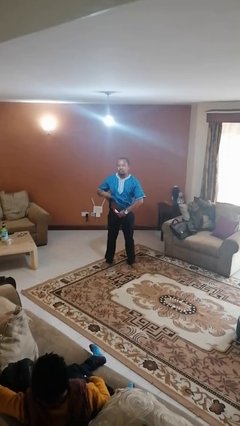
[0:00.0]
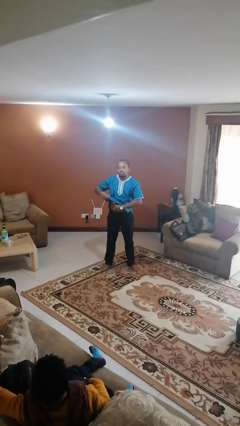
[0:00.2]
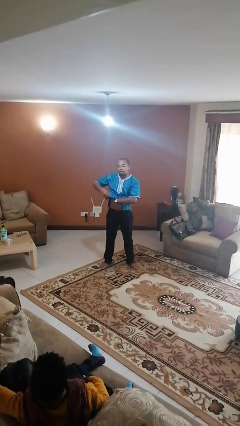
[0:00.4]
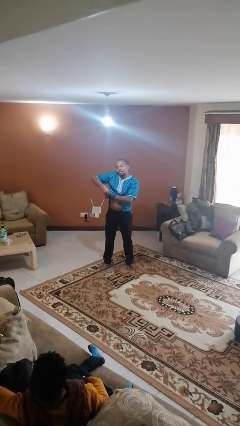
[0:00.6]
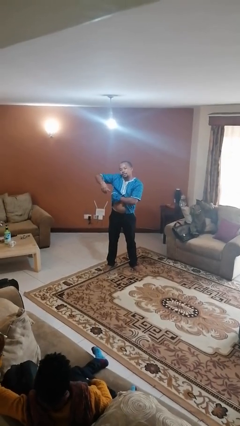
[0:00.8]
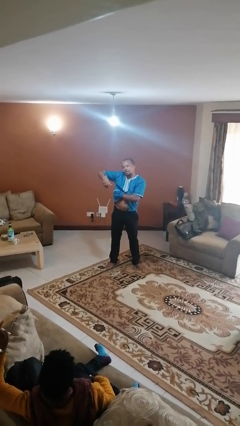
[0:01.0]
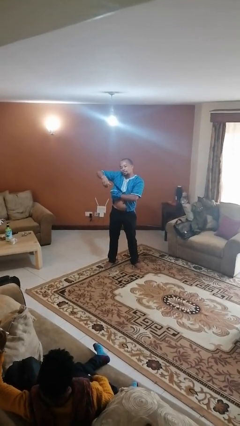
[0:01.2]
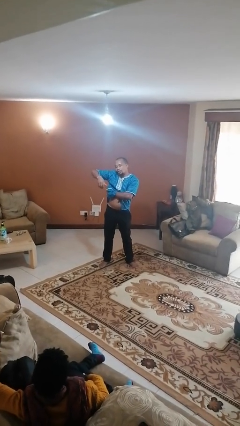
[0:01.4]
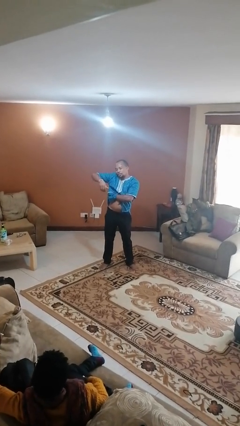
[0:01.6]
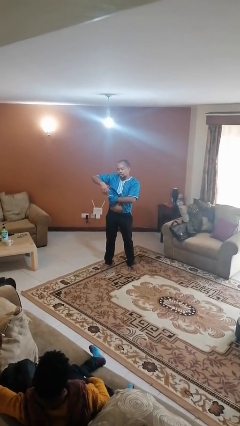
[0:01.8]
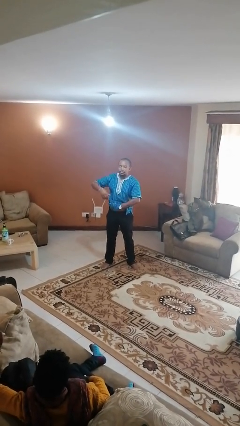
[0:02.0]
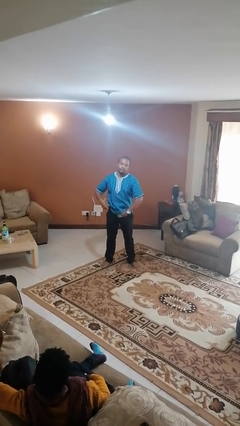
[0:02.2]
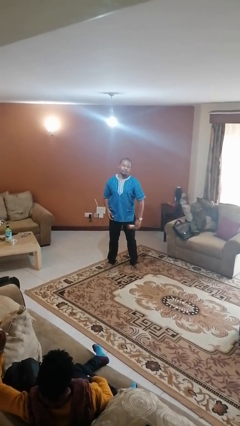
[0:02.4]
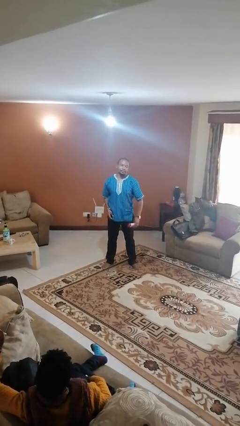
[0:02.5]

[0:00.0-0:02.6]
person applies deodorant

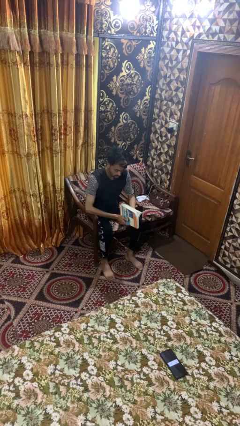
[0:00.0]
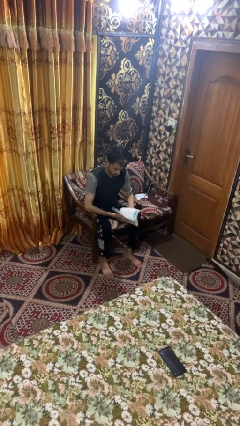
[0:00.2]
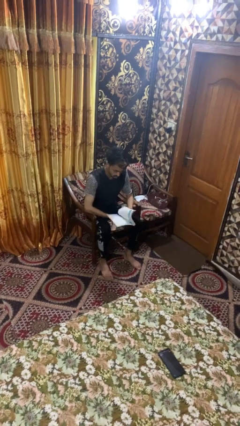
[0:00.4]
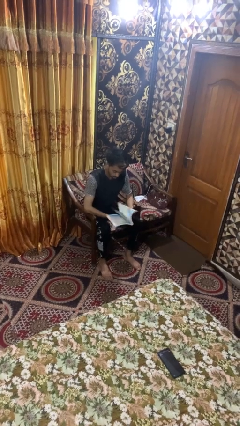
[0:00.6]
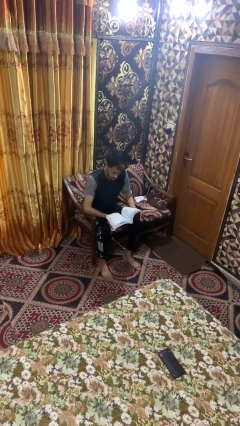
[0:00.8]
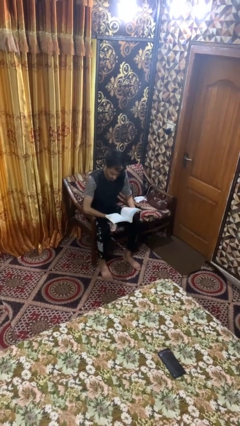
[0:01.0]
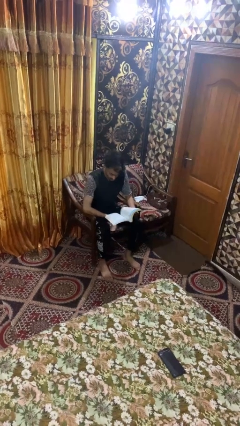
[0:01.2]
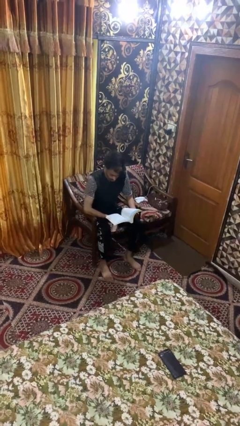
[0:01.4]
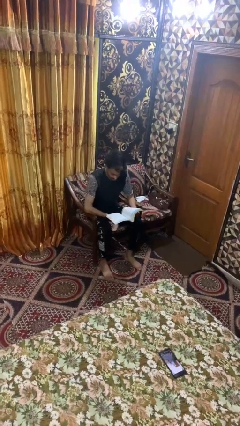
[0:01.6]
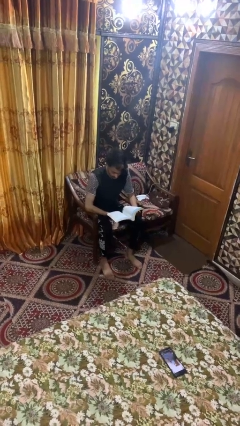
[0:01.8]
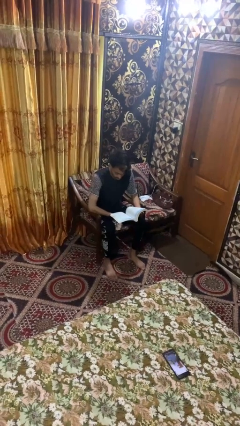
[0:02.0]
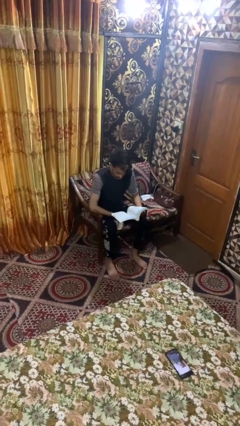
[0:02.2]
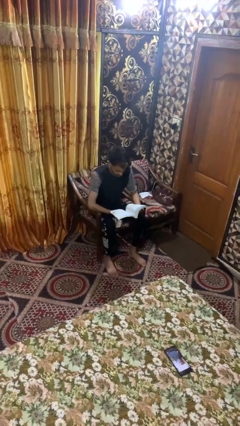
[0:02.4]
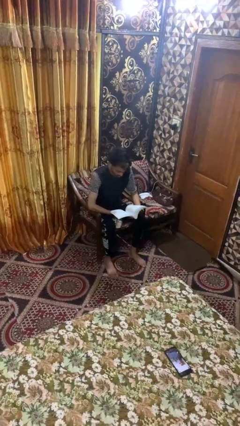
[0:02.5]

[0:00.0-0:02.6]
person reads book

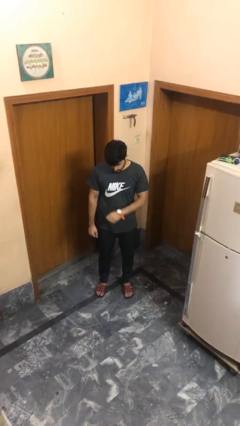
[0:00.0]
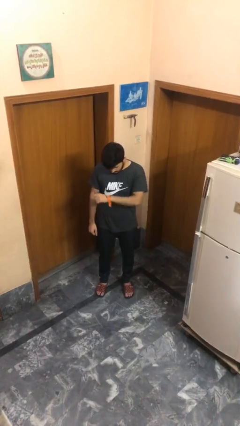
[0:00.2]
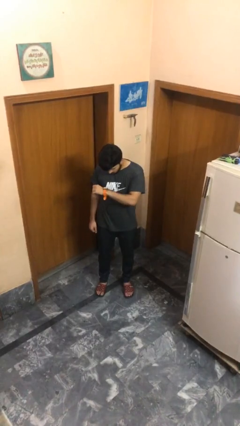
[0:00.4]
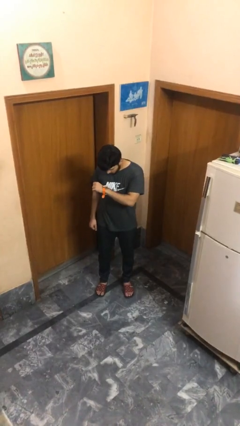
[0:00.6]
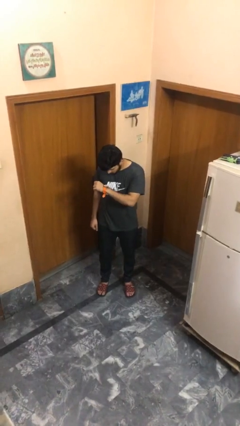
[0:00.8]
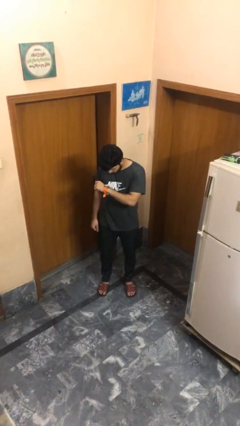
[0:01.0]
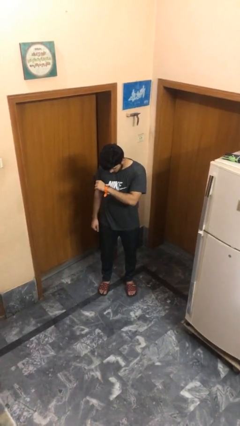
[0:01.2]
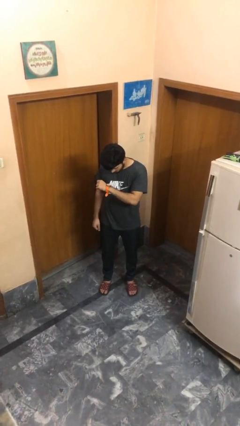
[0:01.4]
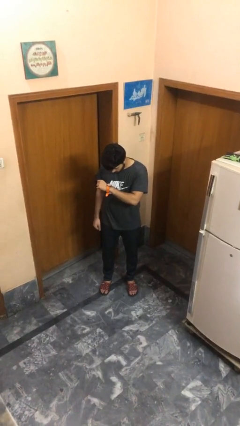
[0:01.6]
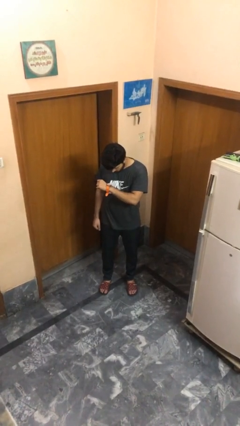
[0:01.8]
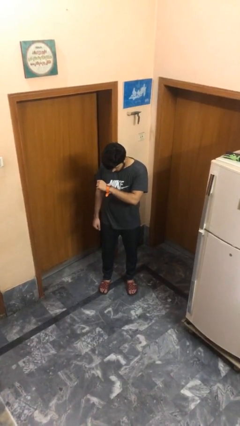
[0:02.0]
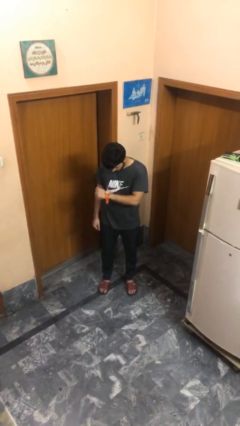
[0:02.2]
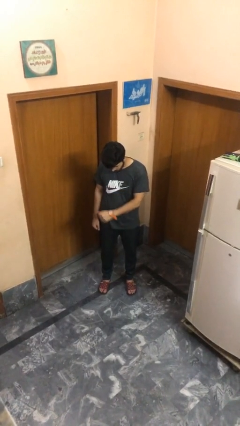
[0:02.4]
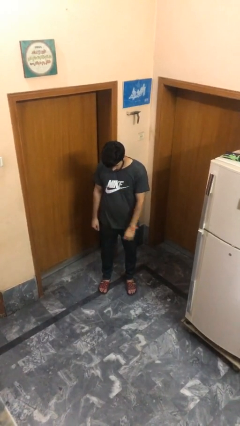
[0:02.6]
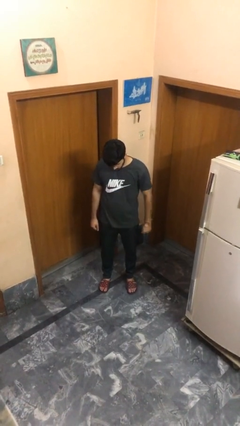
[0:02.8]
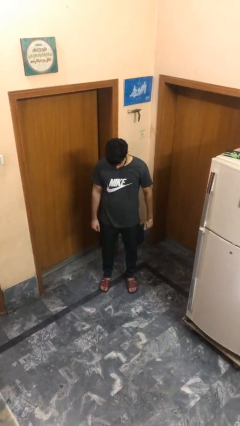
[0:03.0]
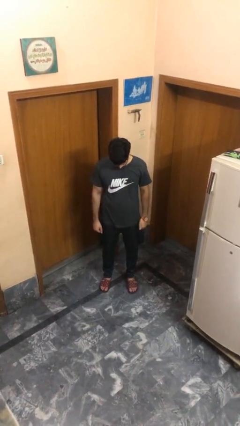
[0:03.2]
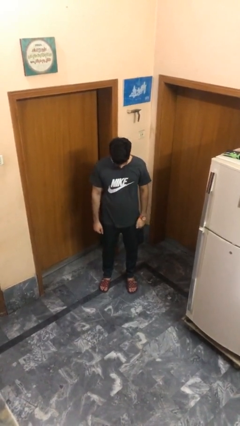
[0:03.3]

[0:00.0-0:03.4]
person looks at wristwatch

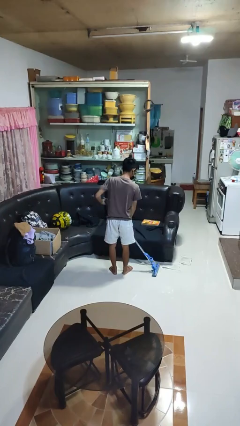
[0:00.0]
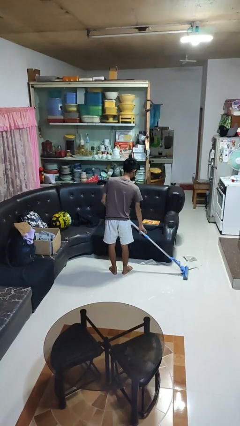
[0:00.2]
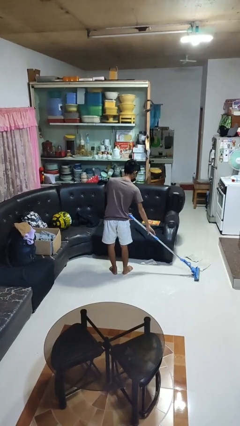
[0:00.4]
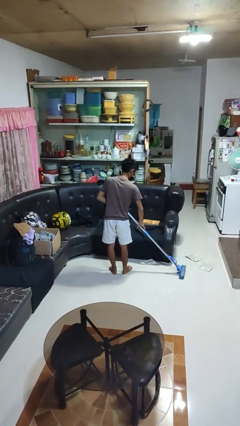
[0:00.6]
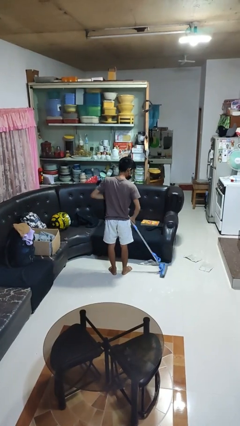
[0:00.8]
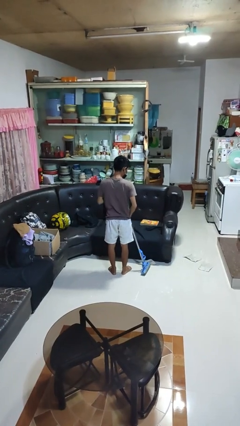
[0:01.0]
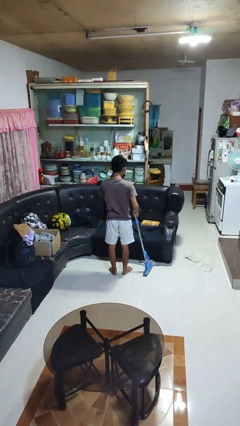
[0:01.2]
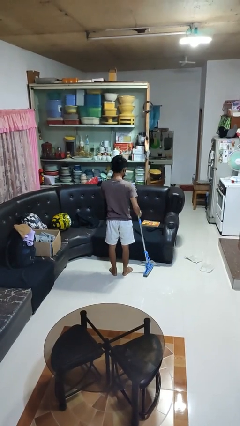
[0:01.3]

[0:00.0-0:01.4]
person mops

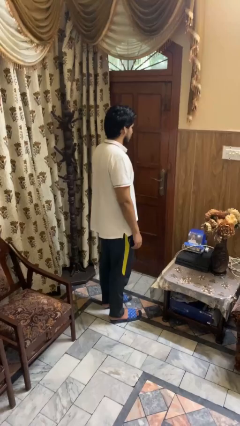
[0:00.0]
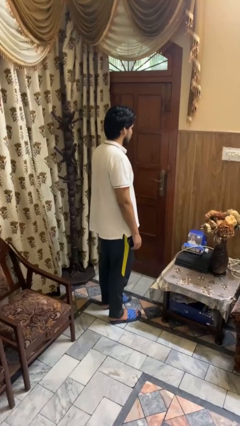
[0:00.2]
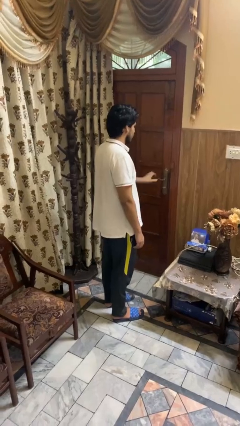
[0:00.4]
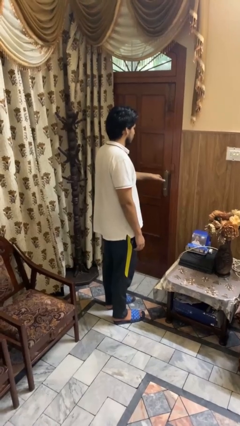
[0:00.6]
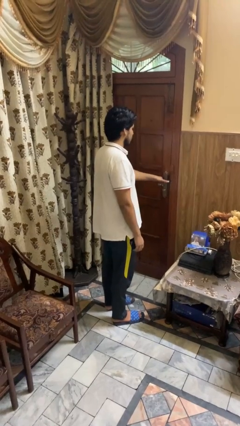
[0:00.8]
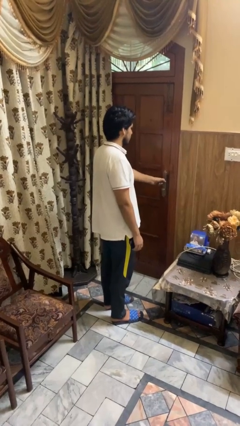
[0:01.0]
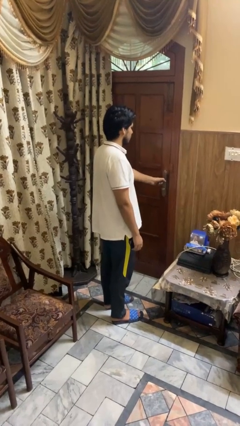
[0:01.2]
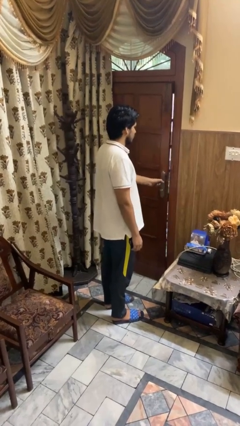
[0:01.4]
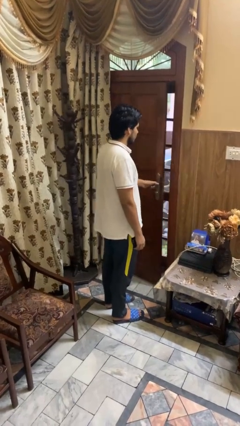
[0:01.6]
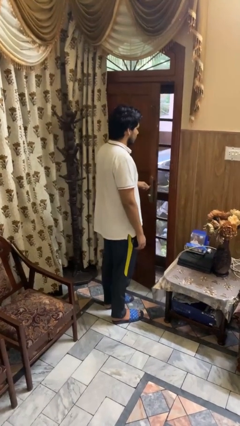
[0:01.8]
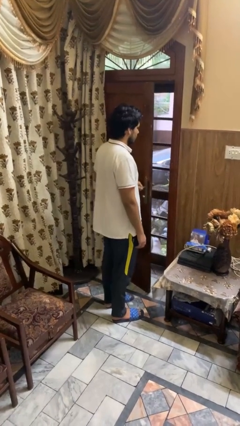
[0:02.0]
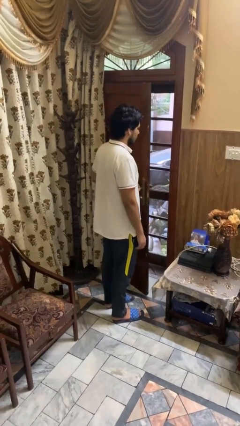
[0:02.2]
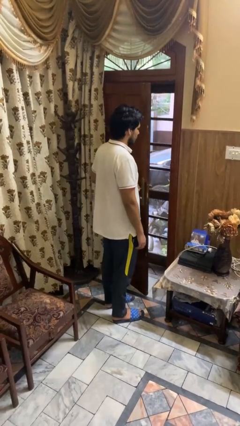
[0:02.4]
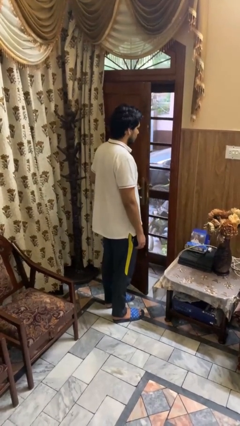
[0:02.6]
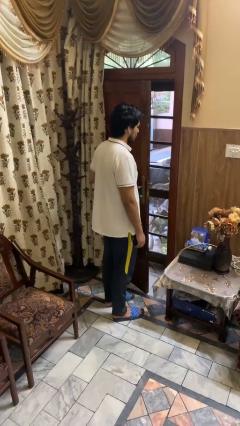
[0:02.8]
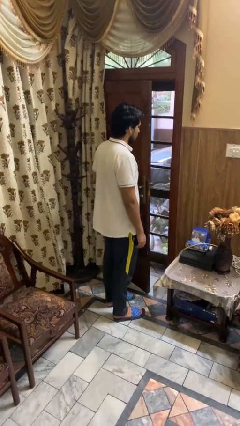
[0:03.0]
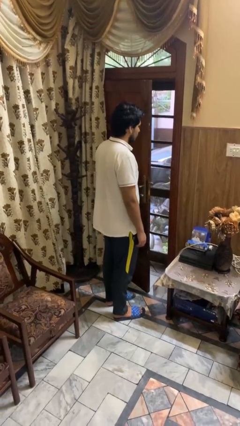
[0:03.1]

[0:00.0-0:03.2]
person opens facility door

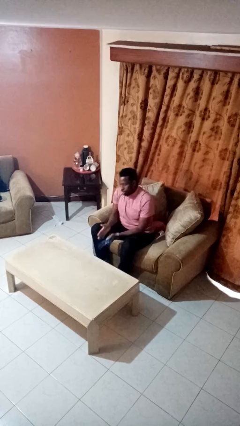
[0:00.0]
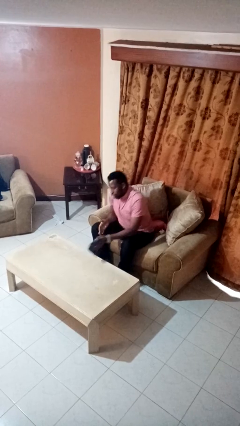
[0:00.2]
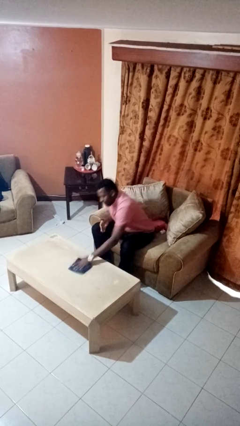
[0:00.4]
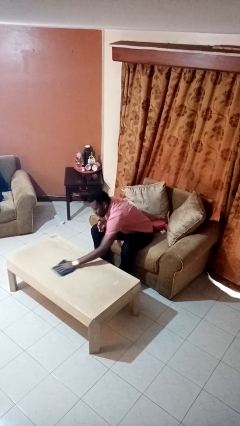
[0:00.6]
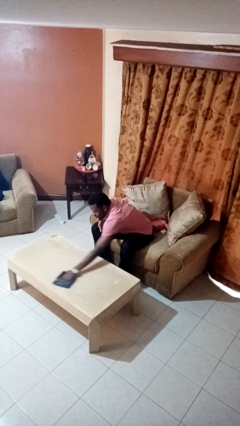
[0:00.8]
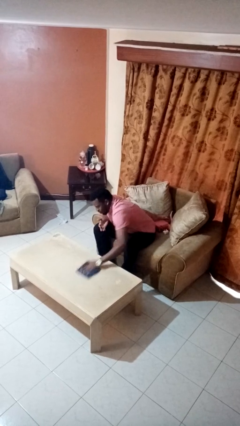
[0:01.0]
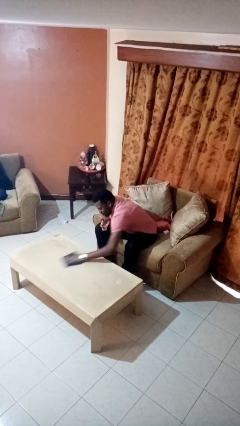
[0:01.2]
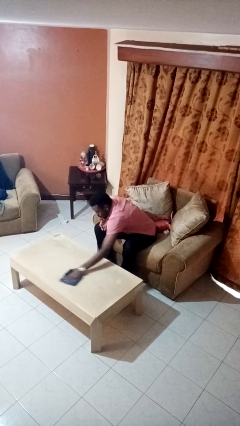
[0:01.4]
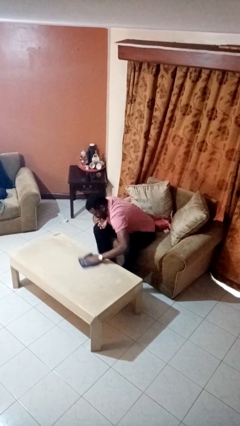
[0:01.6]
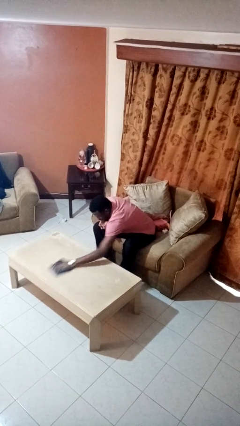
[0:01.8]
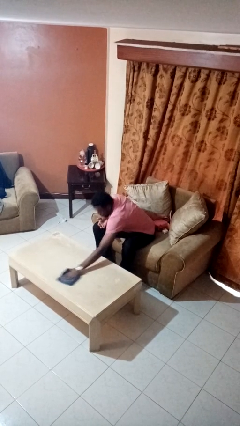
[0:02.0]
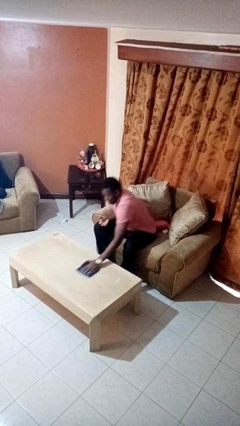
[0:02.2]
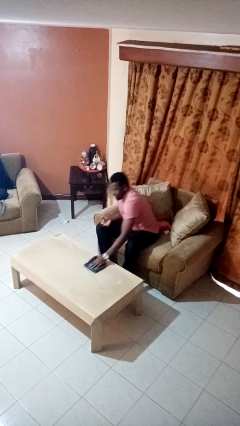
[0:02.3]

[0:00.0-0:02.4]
person cleans table with rag

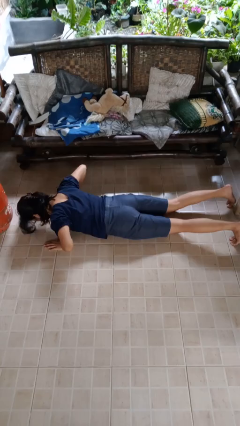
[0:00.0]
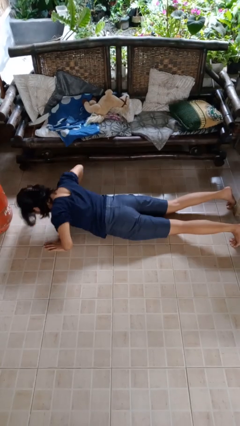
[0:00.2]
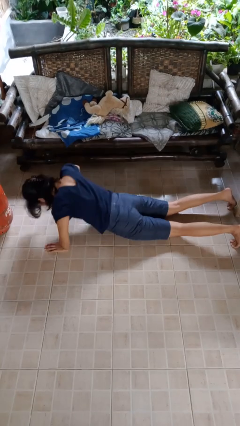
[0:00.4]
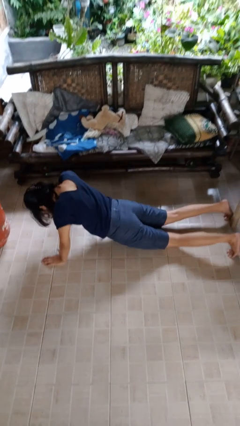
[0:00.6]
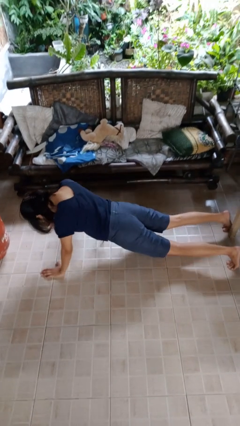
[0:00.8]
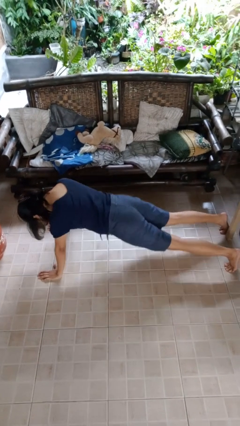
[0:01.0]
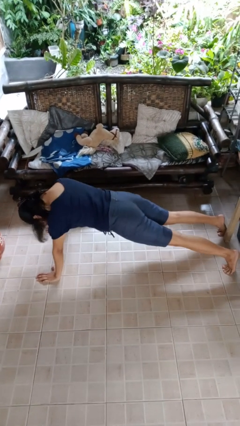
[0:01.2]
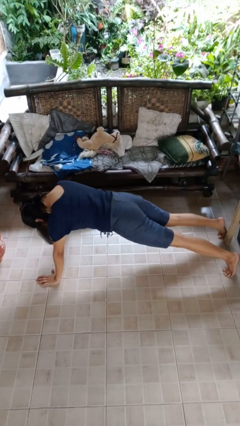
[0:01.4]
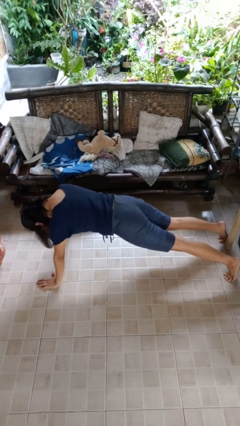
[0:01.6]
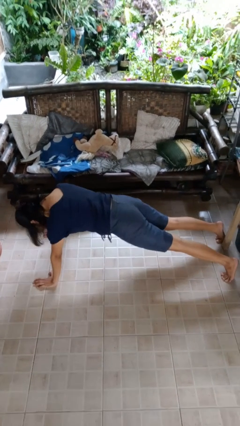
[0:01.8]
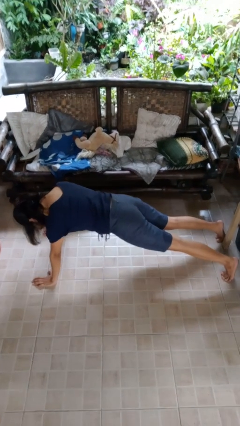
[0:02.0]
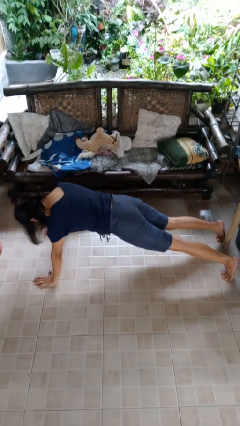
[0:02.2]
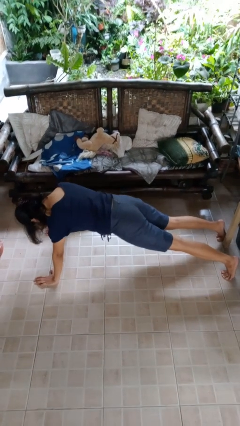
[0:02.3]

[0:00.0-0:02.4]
person exercises with pushup
